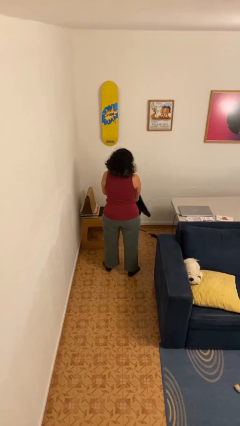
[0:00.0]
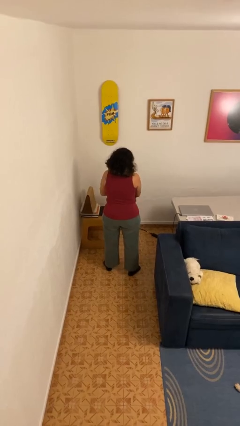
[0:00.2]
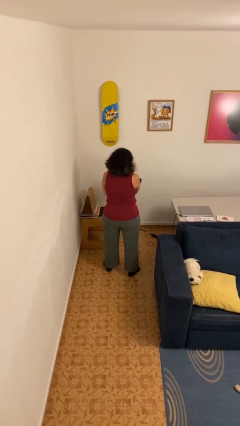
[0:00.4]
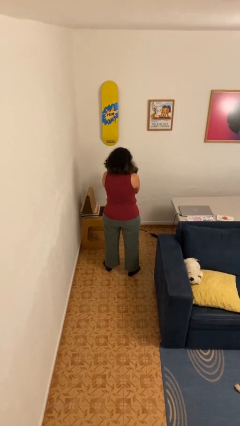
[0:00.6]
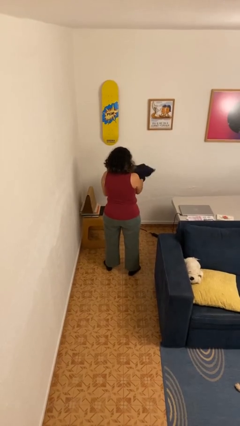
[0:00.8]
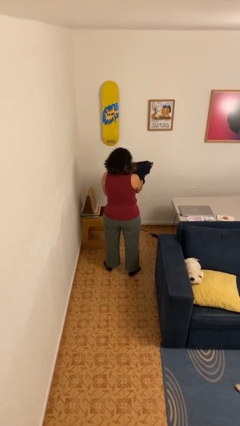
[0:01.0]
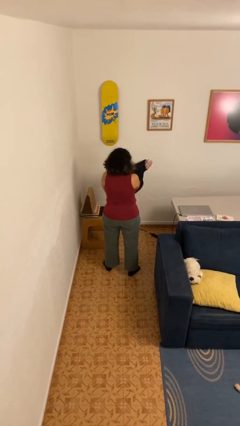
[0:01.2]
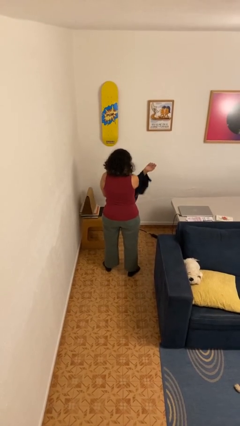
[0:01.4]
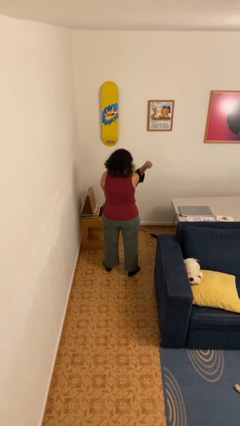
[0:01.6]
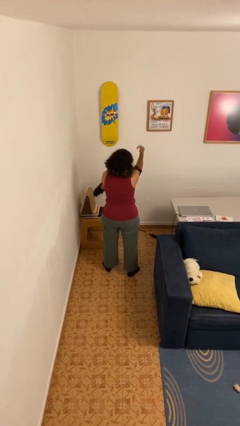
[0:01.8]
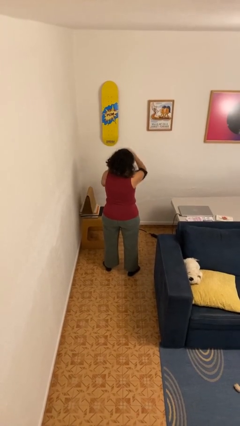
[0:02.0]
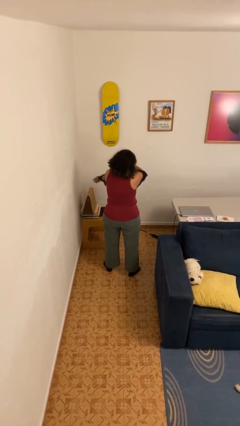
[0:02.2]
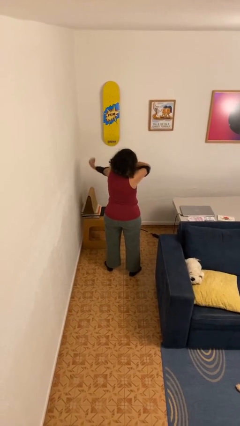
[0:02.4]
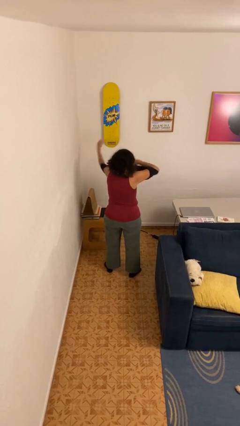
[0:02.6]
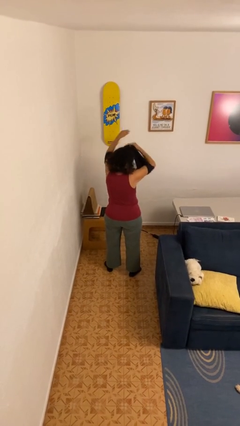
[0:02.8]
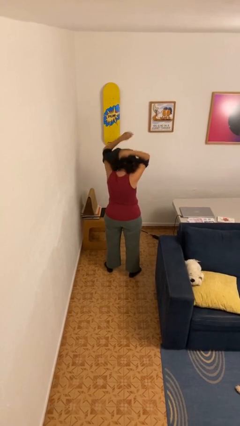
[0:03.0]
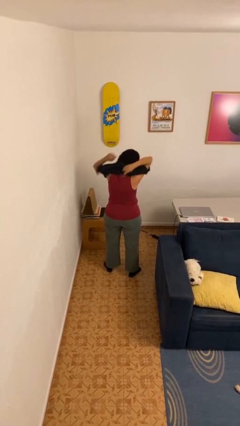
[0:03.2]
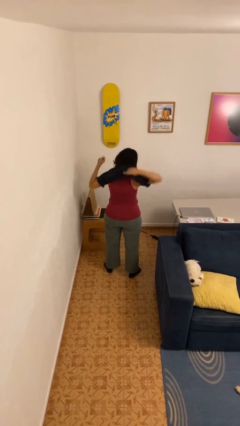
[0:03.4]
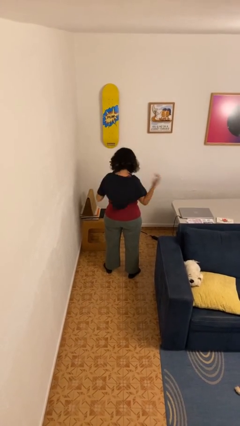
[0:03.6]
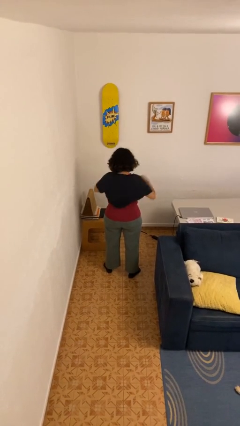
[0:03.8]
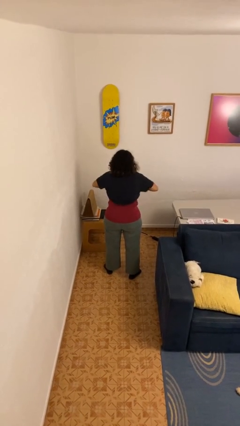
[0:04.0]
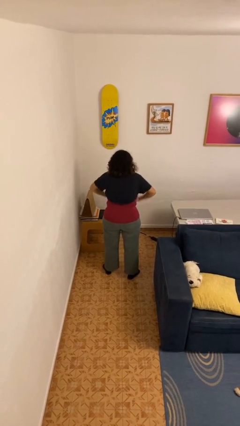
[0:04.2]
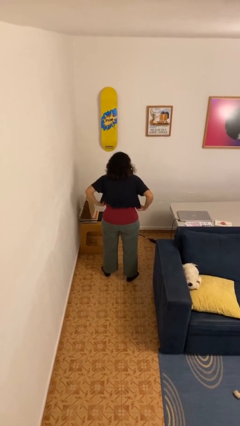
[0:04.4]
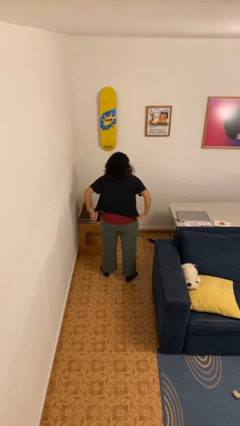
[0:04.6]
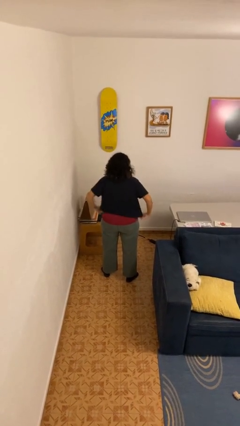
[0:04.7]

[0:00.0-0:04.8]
person puts on shirt

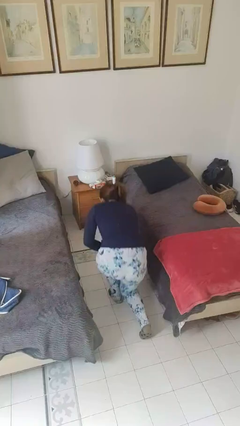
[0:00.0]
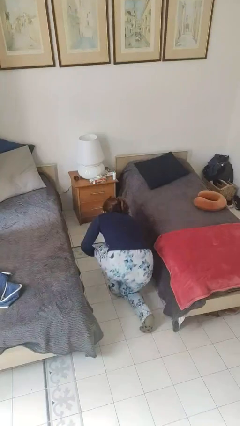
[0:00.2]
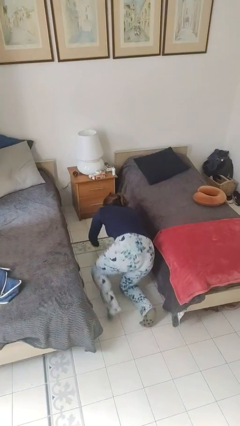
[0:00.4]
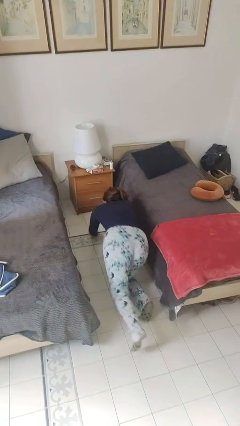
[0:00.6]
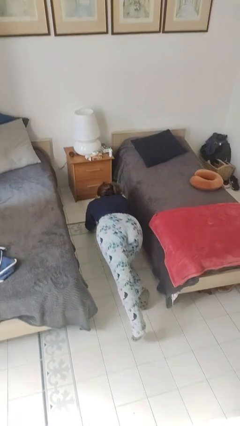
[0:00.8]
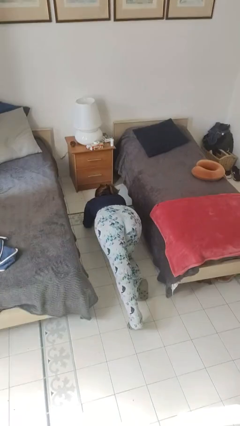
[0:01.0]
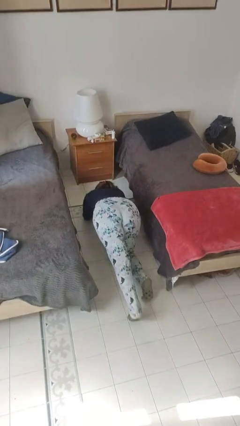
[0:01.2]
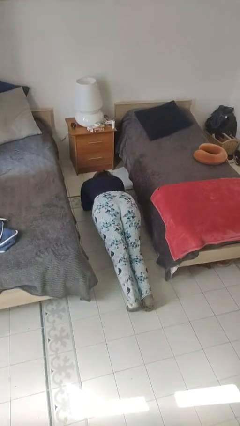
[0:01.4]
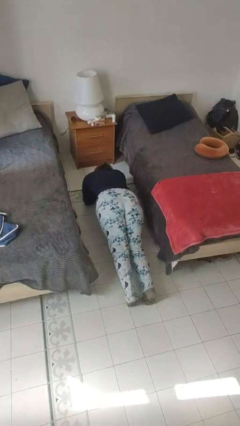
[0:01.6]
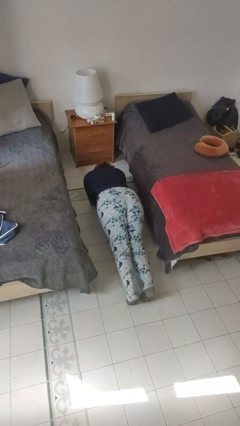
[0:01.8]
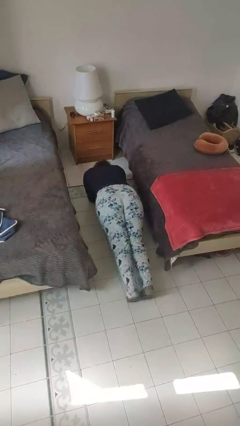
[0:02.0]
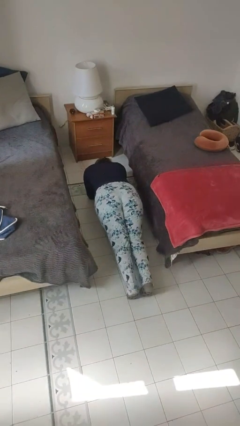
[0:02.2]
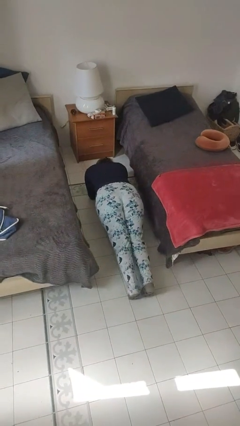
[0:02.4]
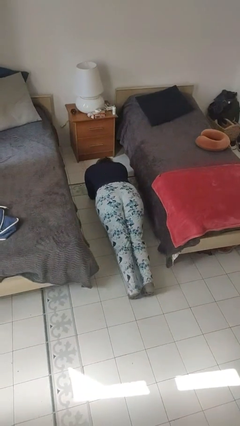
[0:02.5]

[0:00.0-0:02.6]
person exercises with plank

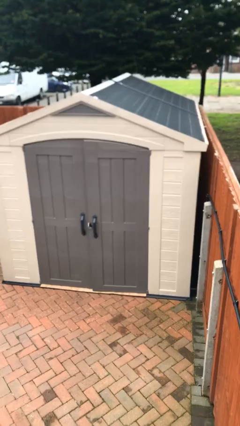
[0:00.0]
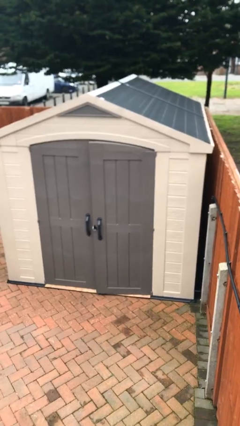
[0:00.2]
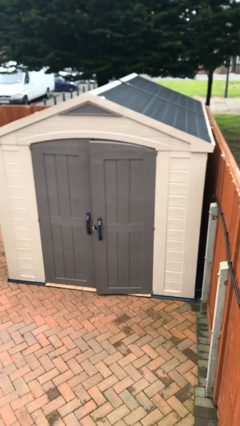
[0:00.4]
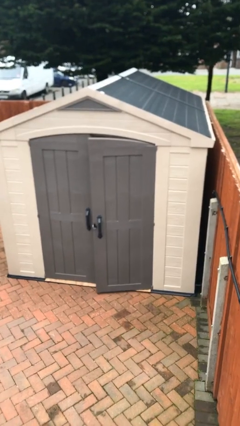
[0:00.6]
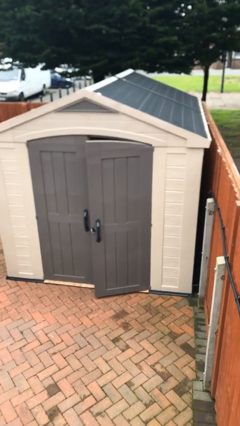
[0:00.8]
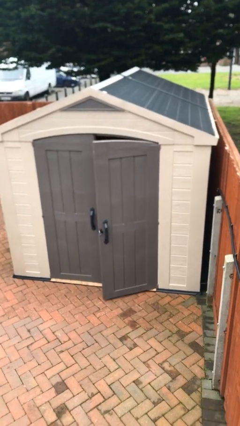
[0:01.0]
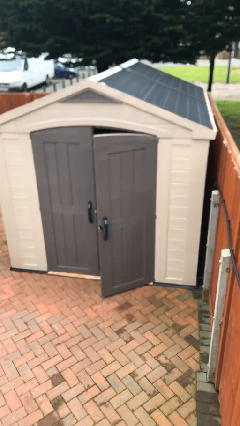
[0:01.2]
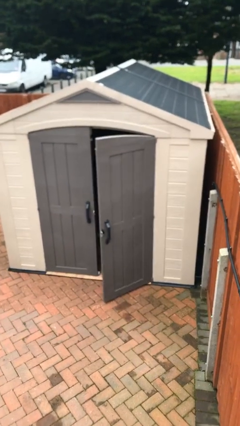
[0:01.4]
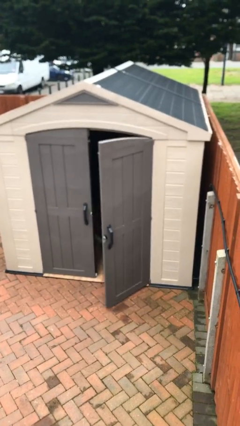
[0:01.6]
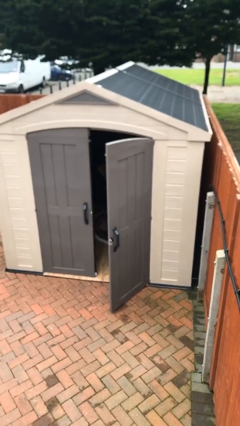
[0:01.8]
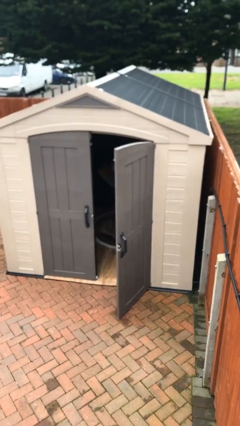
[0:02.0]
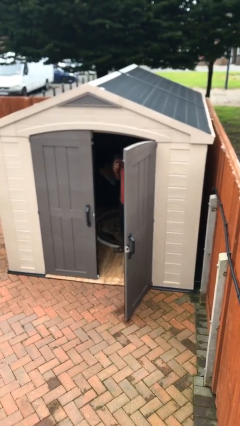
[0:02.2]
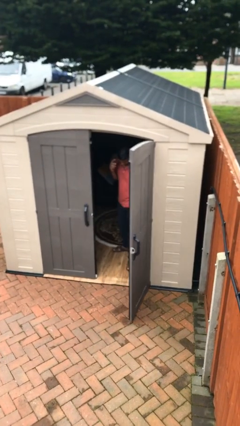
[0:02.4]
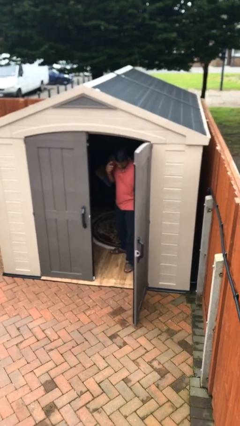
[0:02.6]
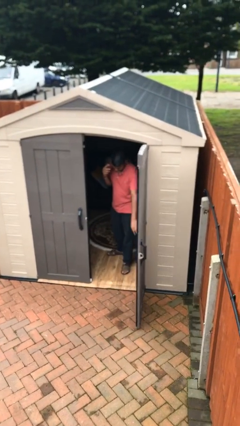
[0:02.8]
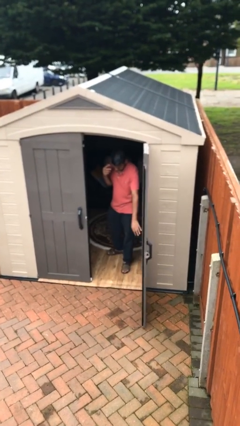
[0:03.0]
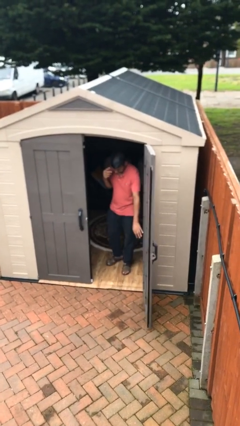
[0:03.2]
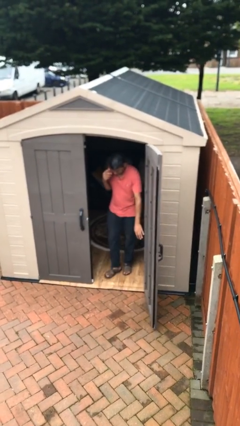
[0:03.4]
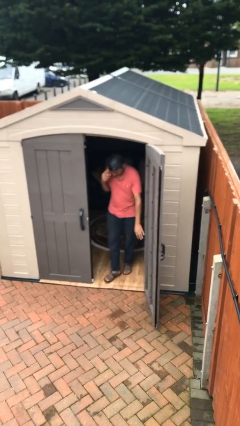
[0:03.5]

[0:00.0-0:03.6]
person opens facility door

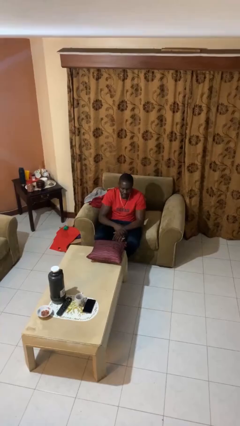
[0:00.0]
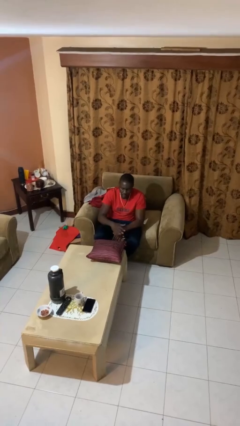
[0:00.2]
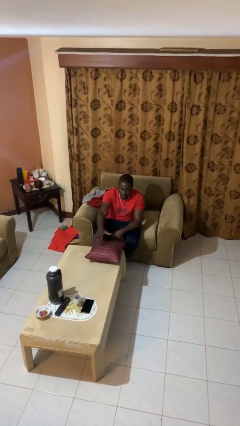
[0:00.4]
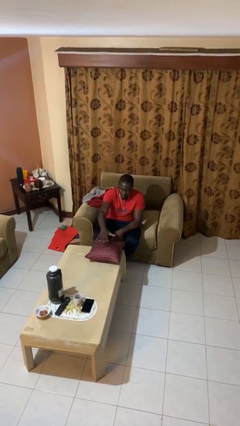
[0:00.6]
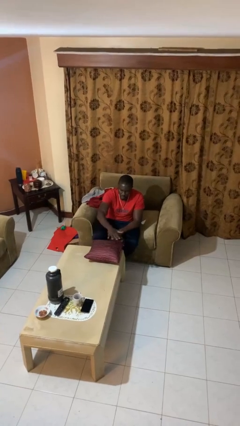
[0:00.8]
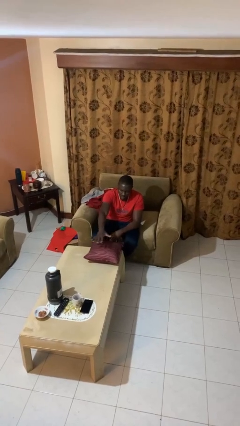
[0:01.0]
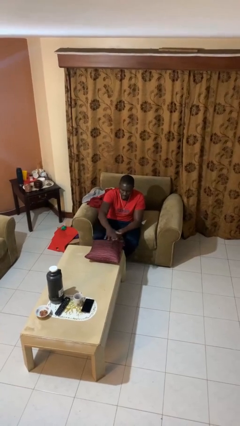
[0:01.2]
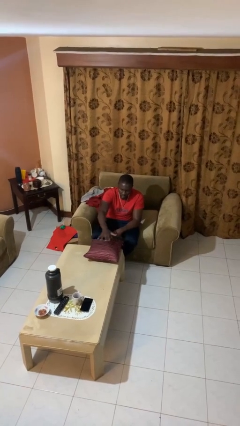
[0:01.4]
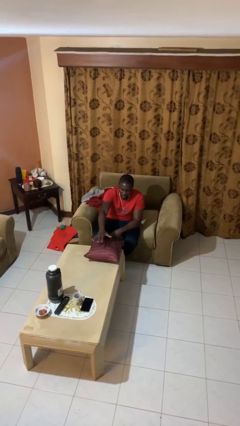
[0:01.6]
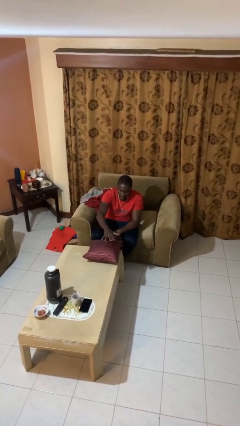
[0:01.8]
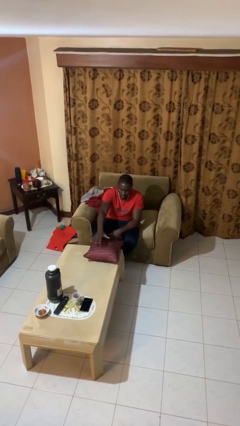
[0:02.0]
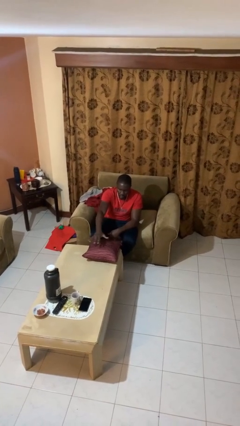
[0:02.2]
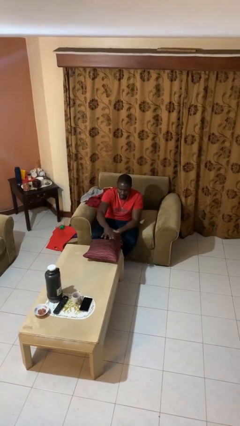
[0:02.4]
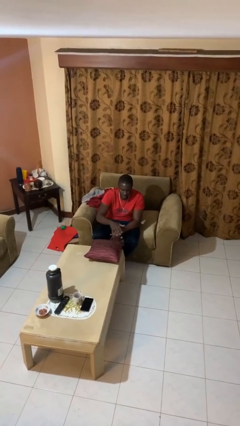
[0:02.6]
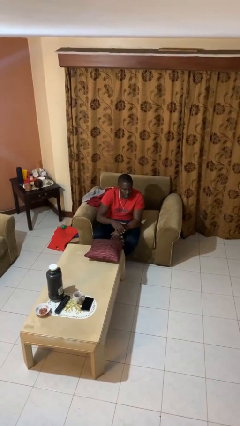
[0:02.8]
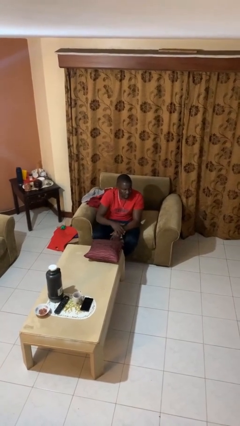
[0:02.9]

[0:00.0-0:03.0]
person waves hand over object

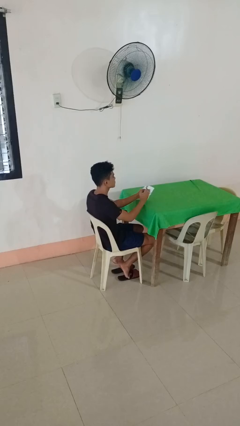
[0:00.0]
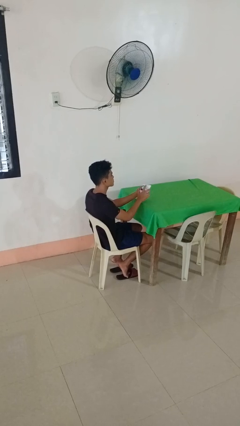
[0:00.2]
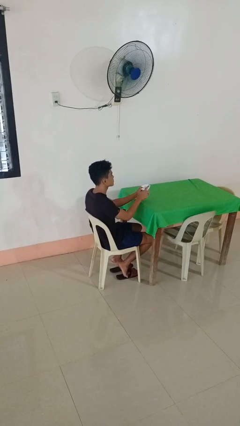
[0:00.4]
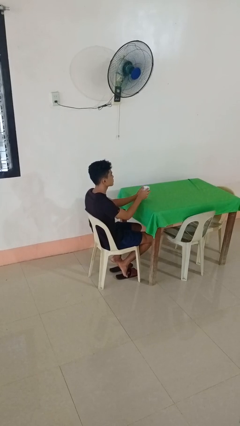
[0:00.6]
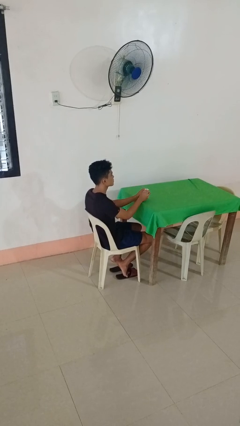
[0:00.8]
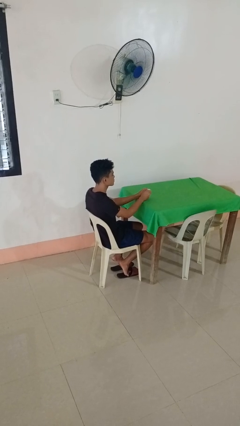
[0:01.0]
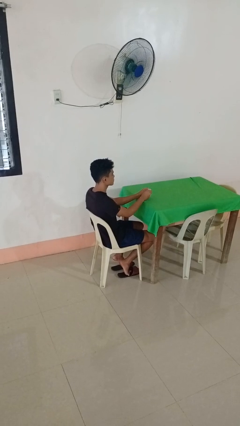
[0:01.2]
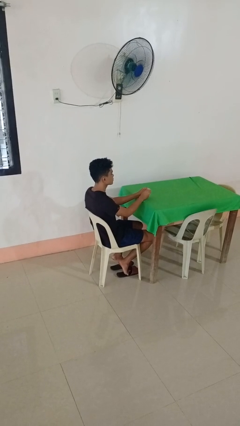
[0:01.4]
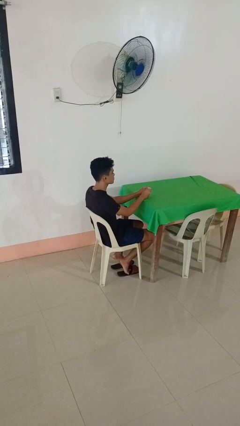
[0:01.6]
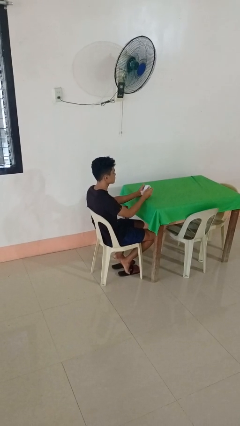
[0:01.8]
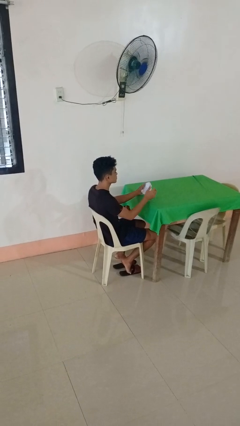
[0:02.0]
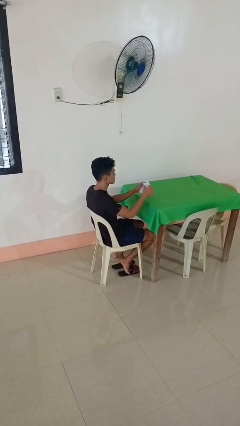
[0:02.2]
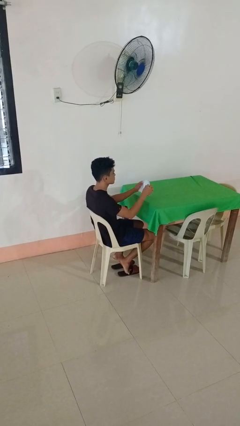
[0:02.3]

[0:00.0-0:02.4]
person crumples paper

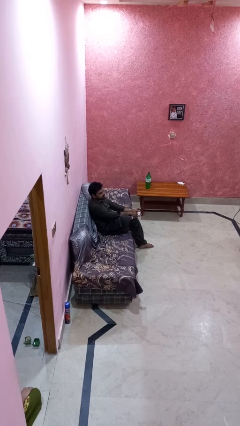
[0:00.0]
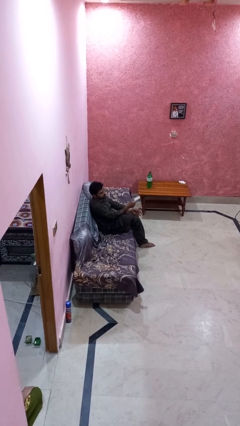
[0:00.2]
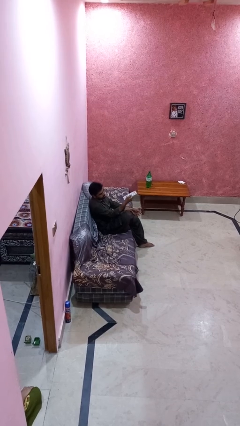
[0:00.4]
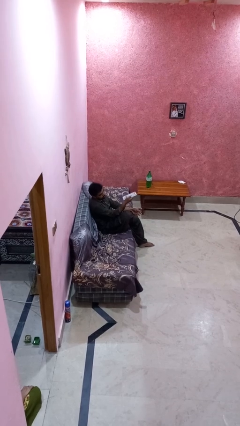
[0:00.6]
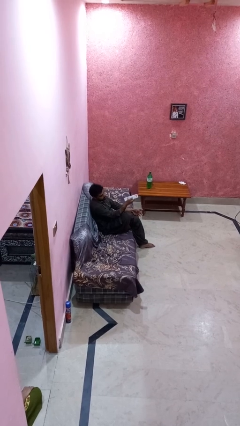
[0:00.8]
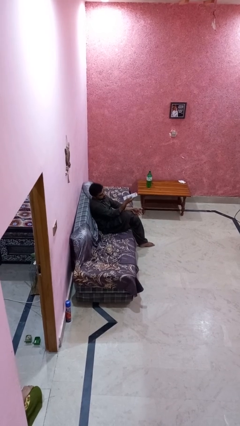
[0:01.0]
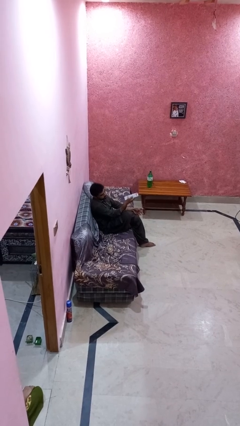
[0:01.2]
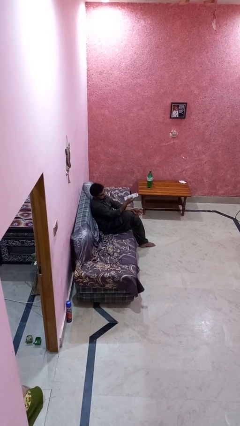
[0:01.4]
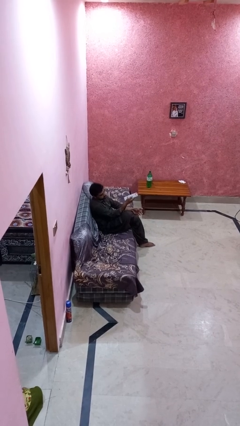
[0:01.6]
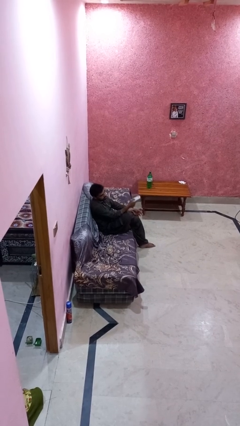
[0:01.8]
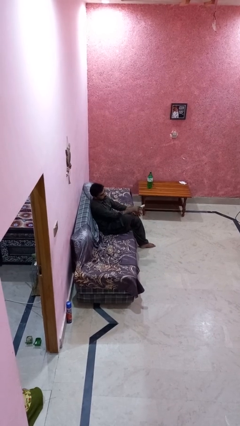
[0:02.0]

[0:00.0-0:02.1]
person uses television remote
